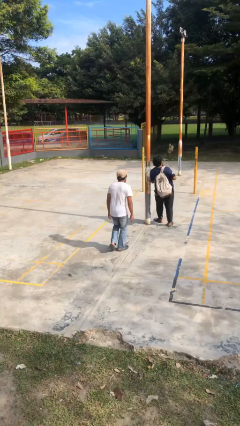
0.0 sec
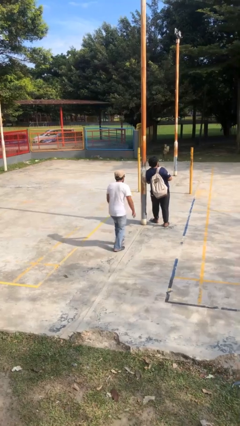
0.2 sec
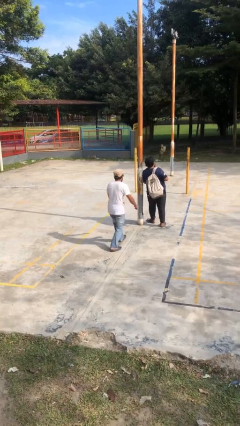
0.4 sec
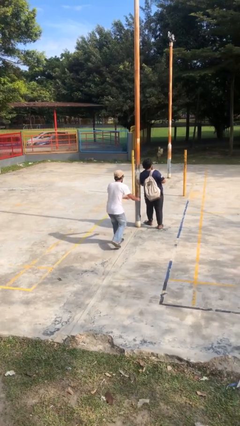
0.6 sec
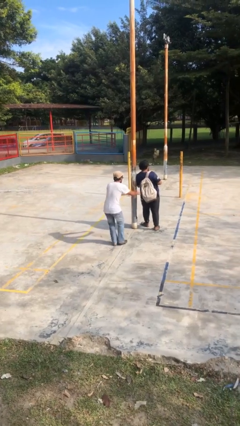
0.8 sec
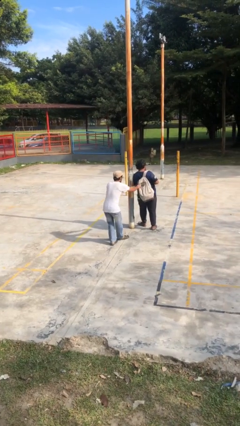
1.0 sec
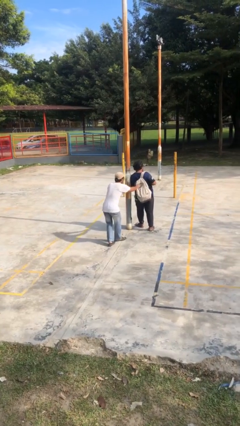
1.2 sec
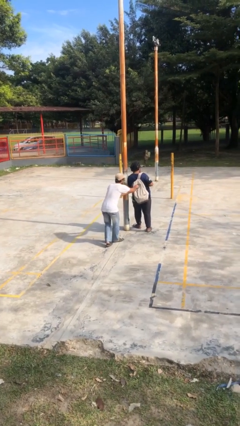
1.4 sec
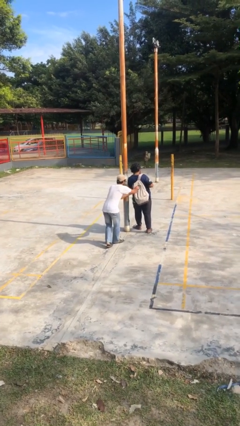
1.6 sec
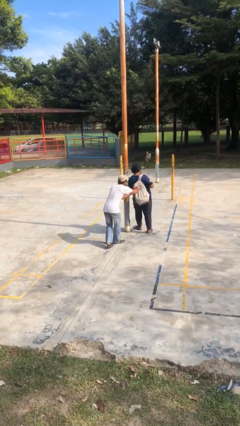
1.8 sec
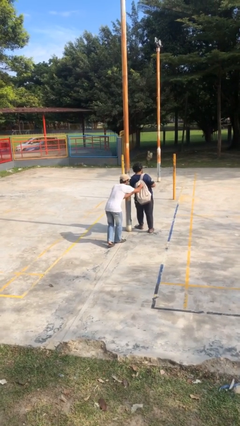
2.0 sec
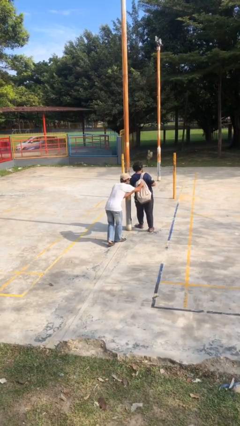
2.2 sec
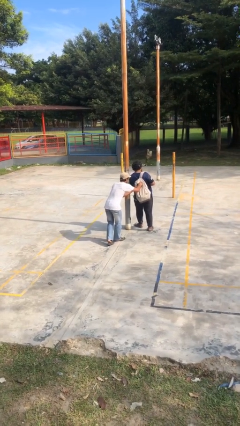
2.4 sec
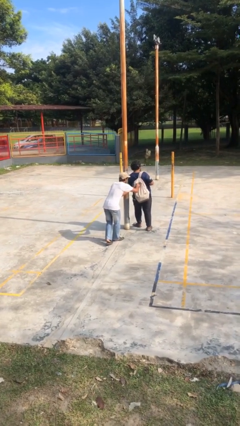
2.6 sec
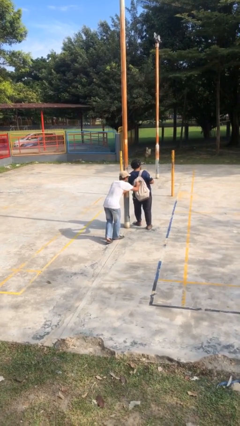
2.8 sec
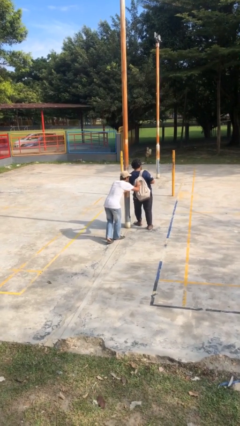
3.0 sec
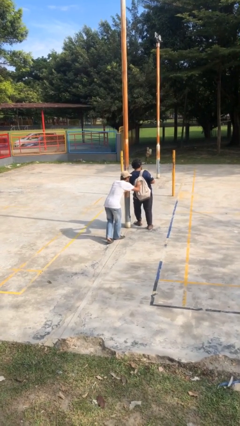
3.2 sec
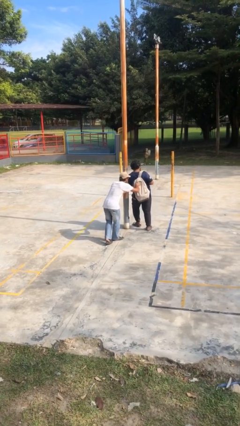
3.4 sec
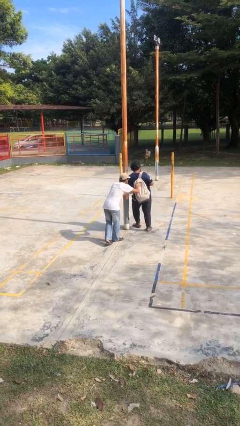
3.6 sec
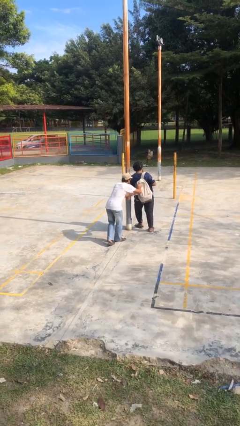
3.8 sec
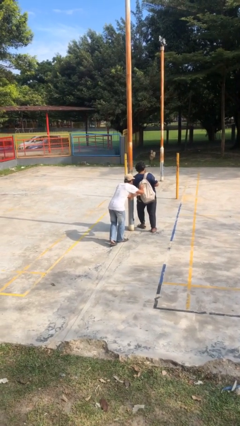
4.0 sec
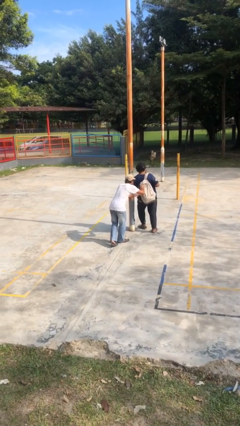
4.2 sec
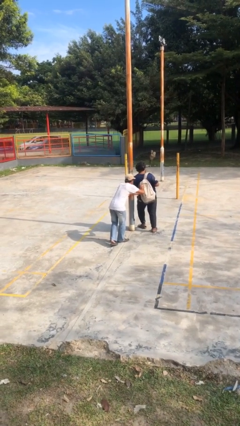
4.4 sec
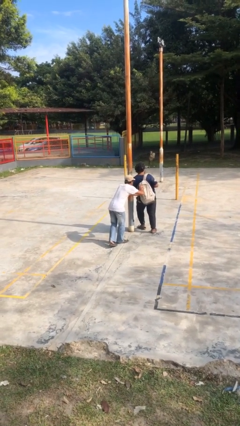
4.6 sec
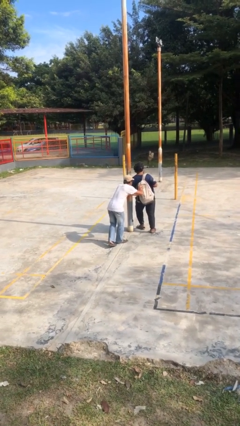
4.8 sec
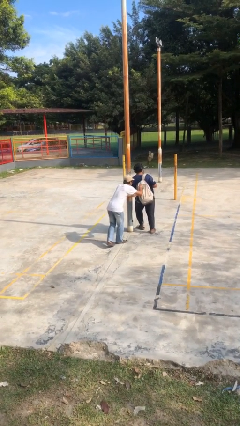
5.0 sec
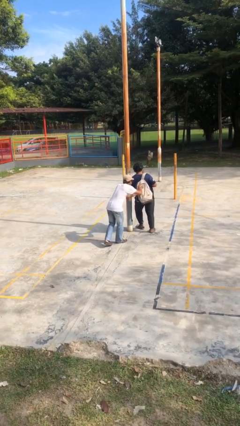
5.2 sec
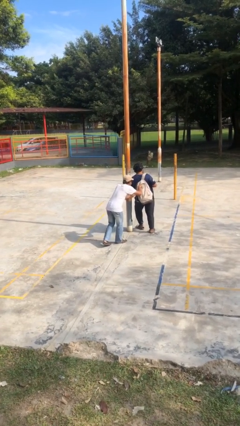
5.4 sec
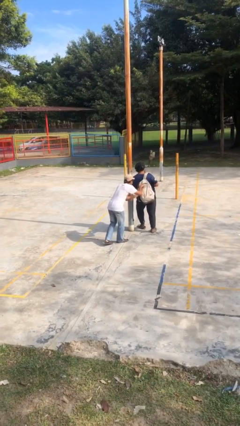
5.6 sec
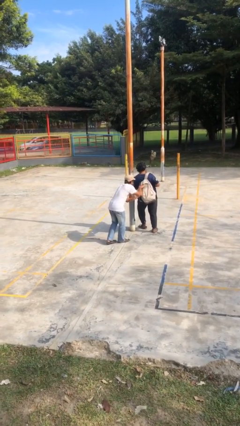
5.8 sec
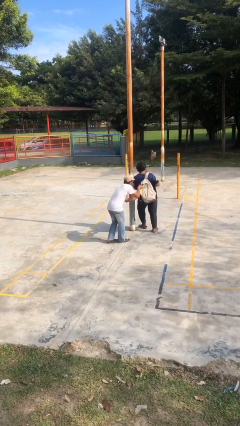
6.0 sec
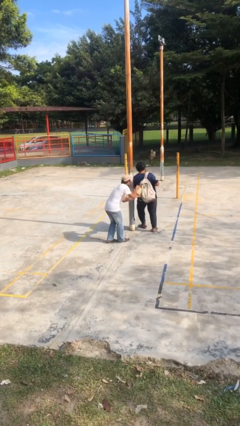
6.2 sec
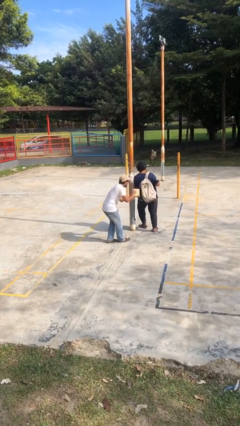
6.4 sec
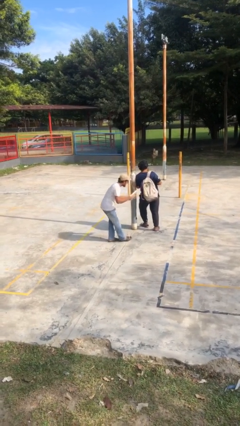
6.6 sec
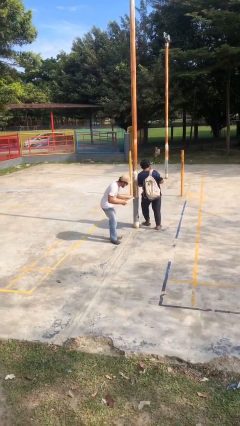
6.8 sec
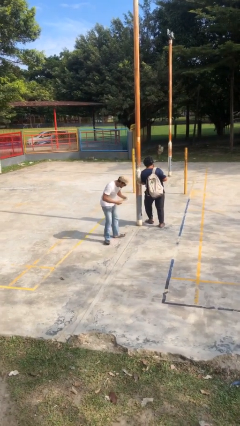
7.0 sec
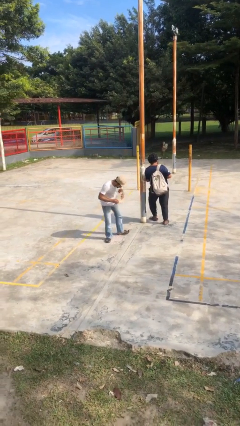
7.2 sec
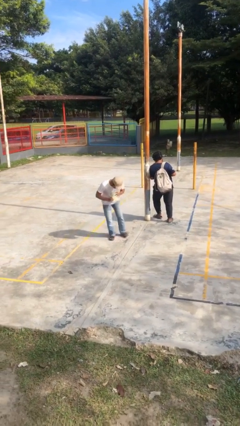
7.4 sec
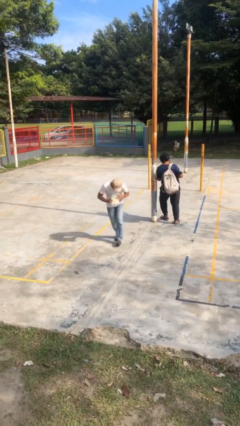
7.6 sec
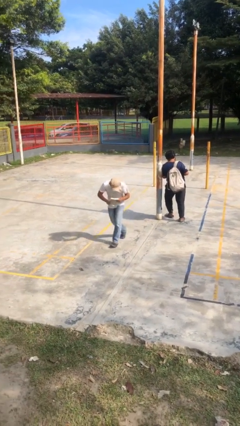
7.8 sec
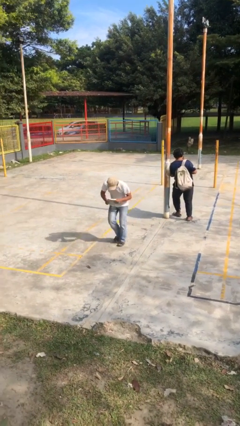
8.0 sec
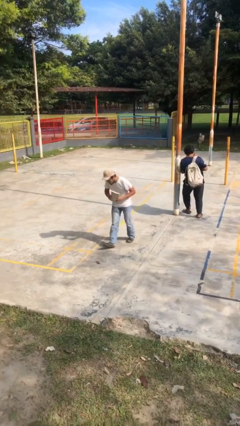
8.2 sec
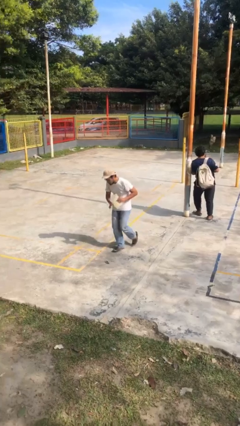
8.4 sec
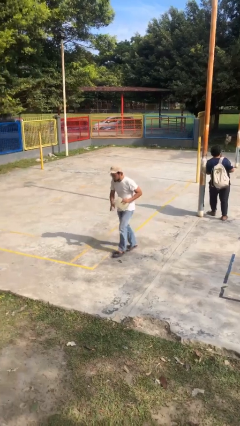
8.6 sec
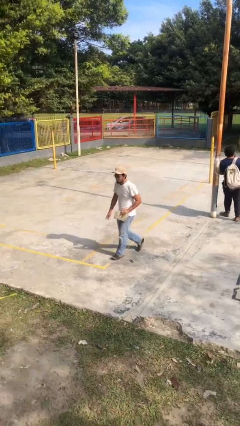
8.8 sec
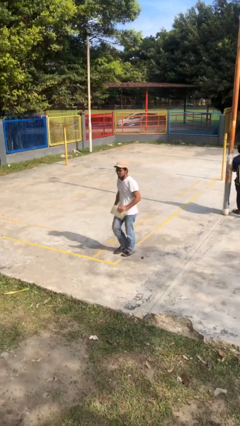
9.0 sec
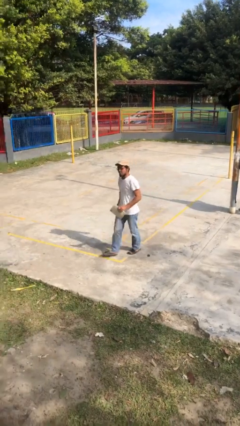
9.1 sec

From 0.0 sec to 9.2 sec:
person steals object from person

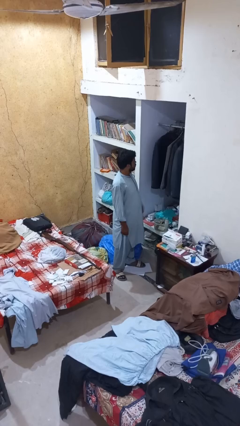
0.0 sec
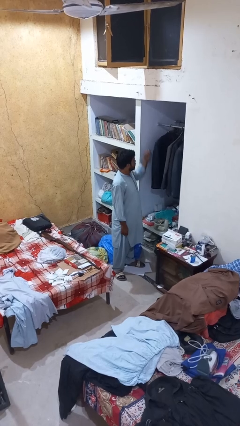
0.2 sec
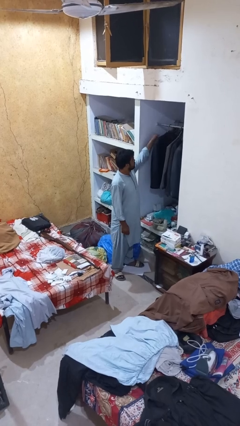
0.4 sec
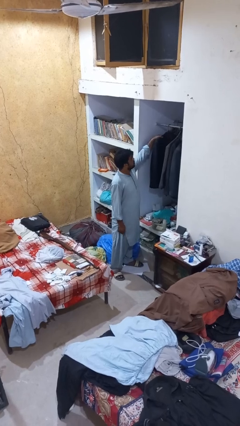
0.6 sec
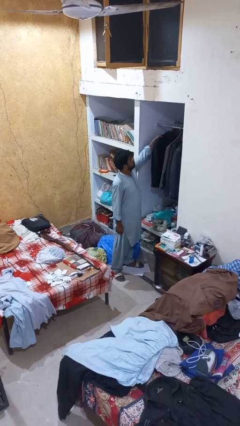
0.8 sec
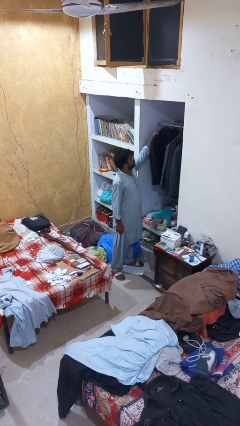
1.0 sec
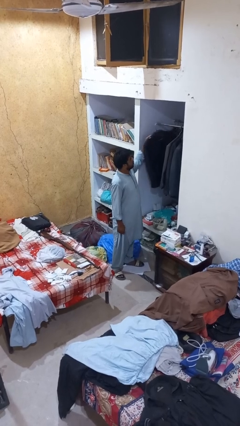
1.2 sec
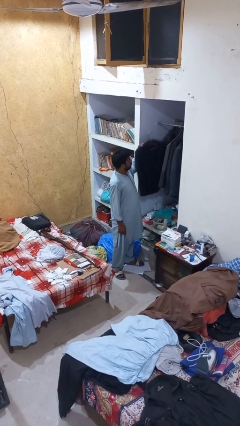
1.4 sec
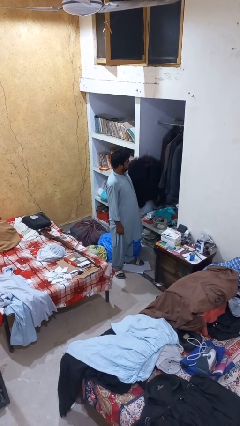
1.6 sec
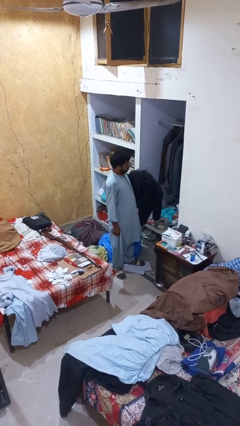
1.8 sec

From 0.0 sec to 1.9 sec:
person takes clothes from closet

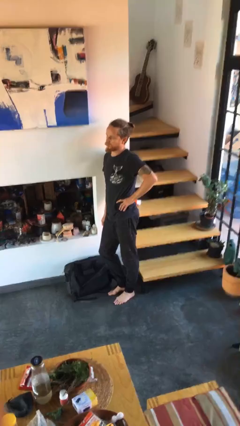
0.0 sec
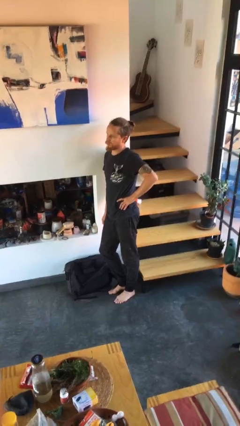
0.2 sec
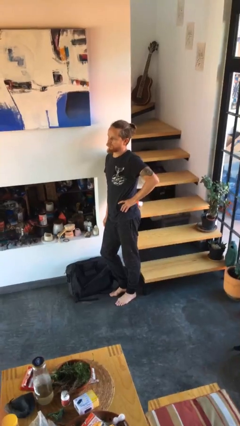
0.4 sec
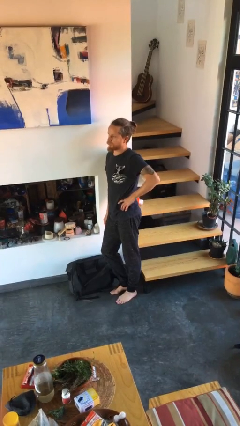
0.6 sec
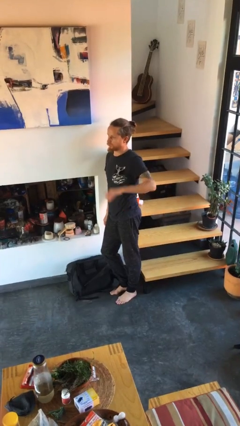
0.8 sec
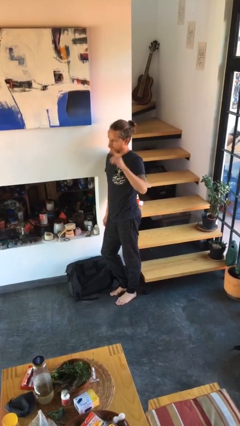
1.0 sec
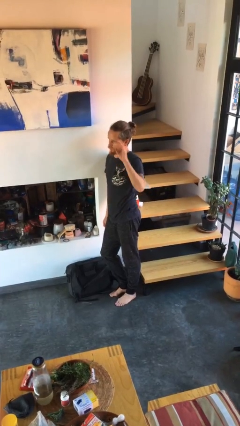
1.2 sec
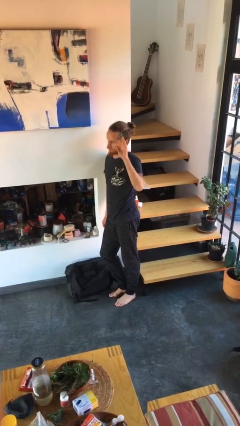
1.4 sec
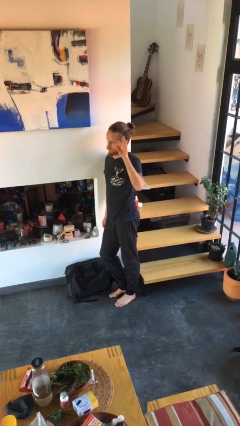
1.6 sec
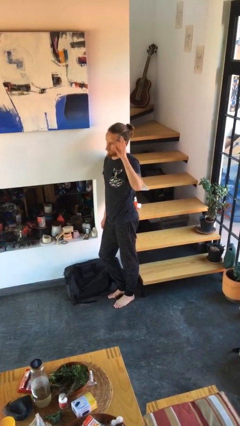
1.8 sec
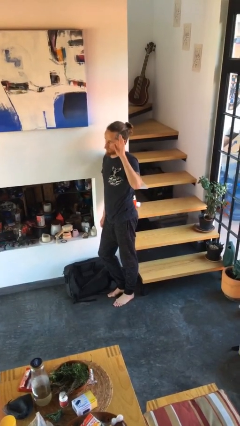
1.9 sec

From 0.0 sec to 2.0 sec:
person gestures raise hand

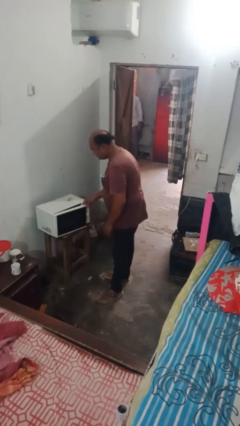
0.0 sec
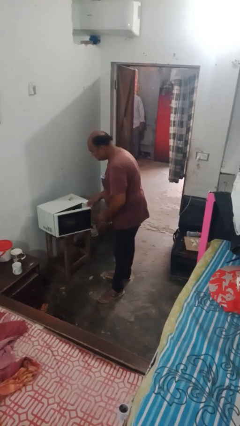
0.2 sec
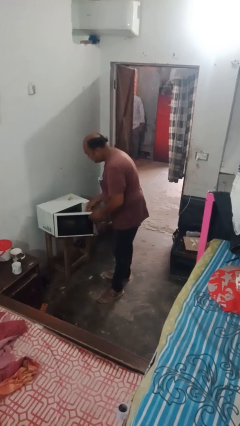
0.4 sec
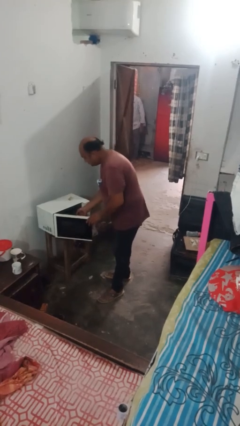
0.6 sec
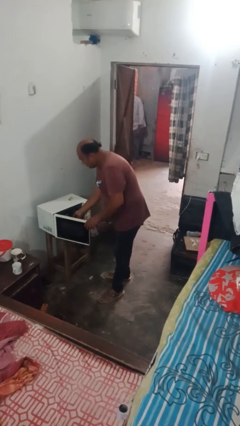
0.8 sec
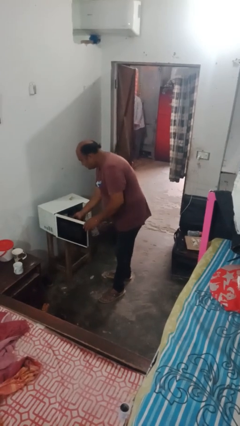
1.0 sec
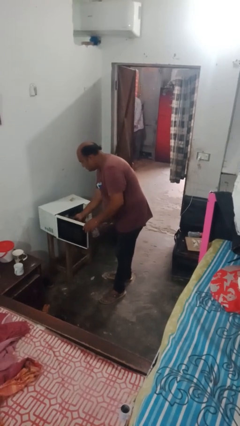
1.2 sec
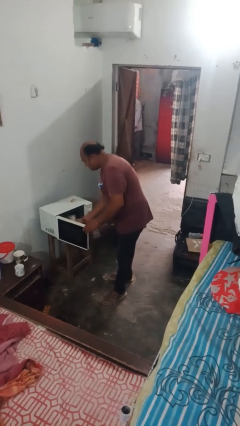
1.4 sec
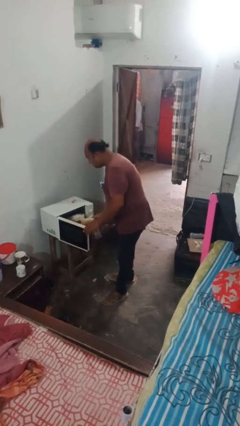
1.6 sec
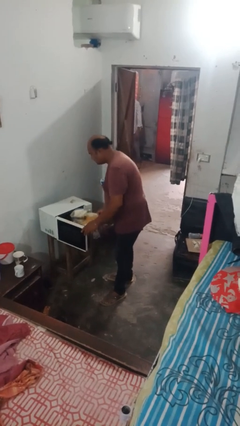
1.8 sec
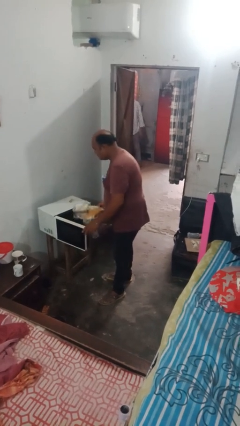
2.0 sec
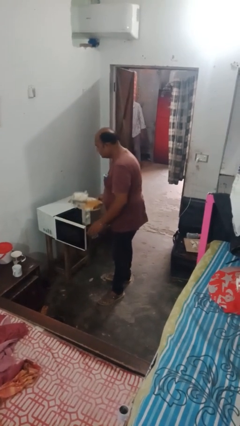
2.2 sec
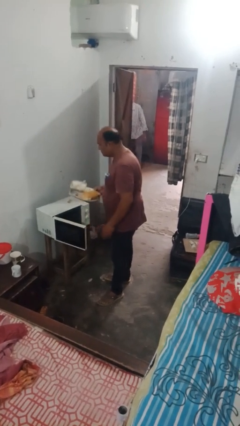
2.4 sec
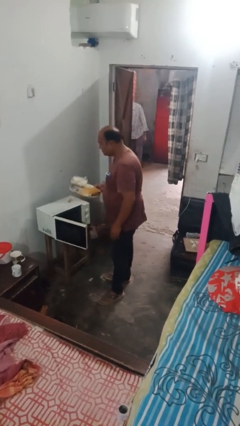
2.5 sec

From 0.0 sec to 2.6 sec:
person takes object from microwave

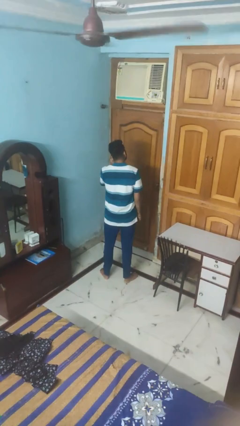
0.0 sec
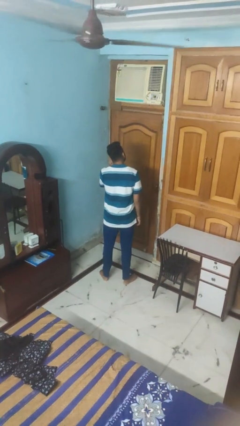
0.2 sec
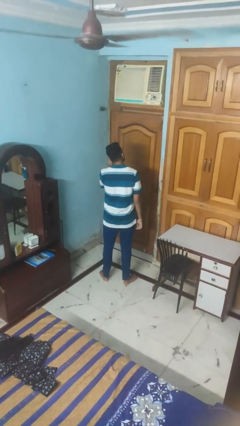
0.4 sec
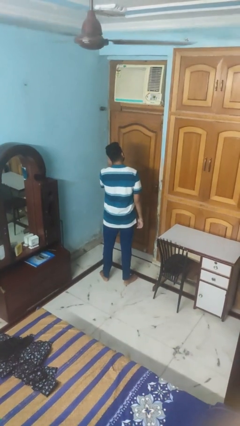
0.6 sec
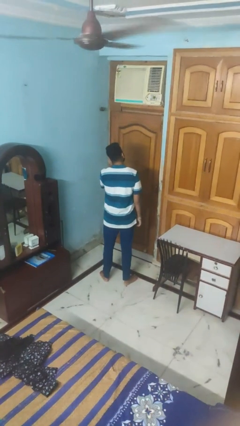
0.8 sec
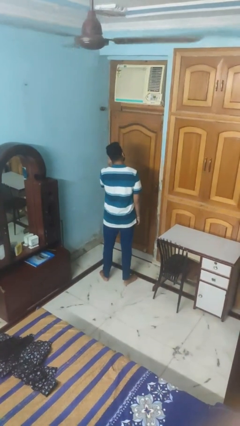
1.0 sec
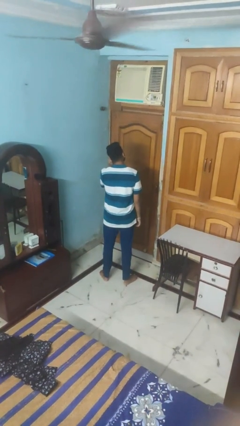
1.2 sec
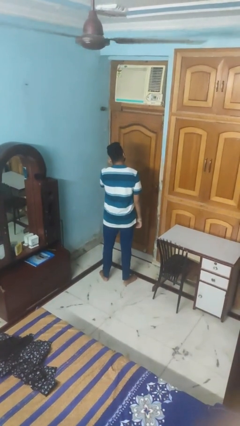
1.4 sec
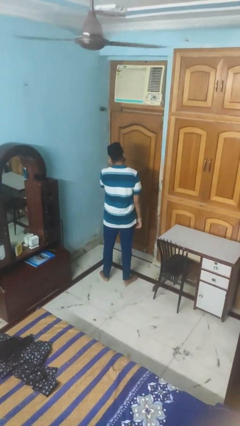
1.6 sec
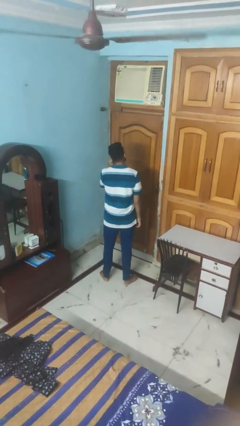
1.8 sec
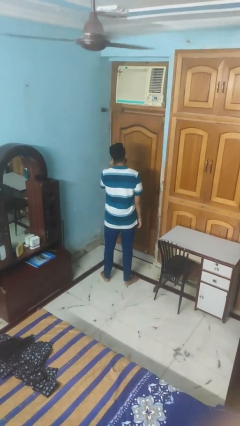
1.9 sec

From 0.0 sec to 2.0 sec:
person touches earlobe
